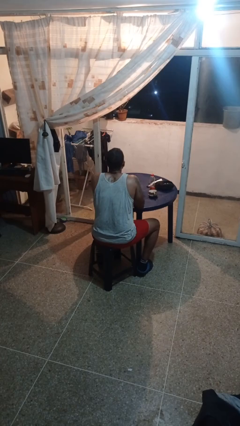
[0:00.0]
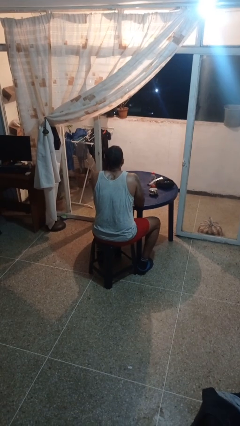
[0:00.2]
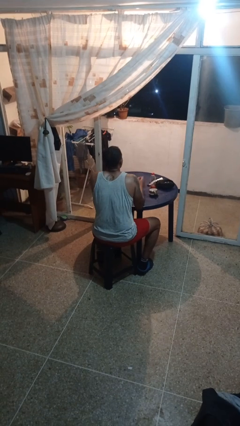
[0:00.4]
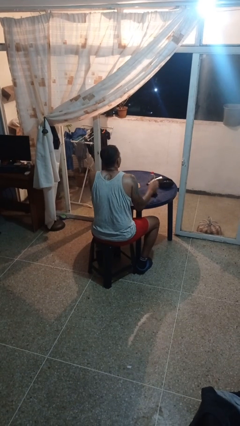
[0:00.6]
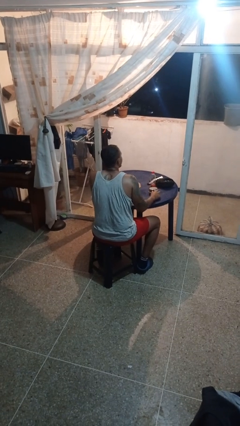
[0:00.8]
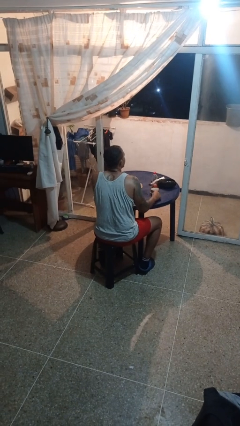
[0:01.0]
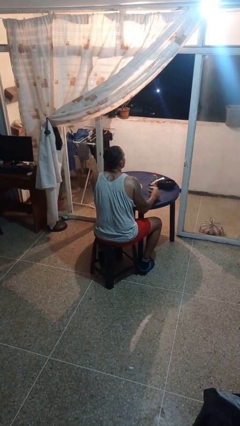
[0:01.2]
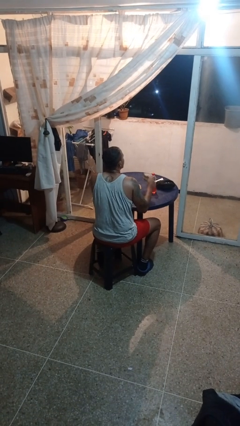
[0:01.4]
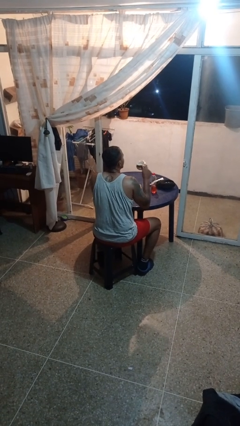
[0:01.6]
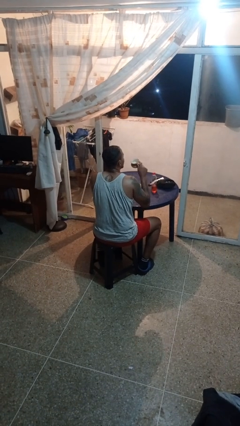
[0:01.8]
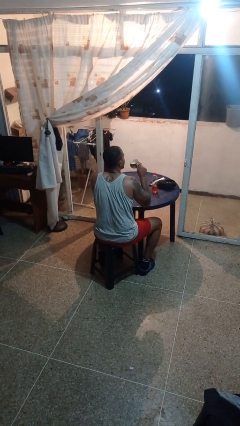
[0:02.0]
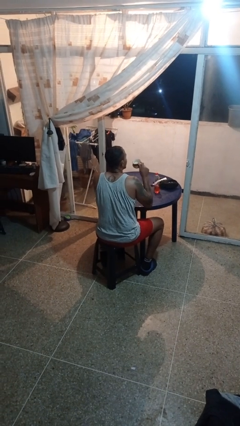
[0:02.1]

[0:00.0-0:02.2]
person picks up object from table

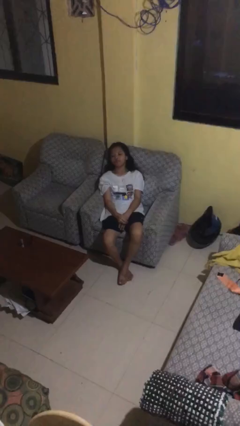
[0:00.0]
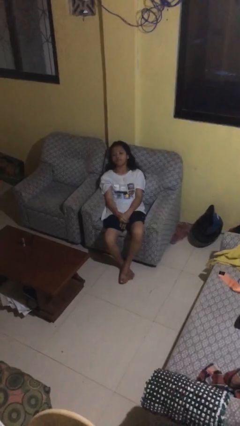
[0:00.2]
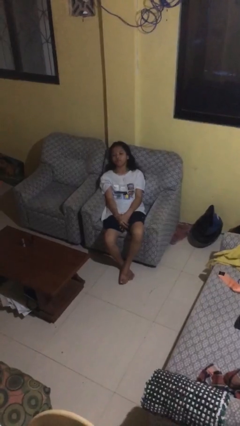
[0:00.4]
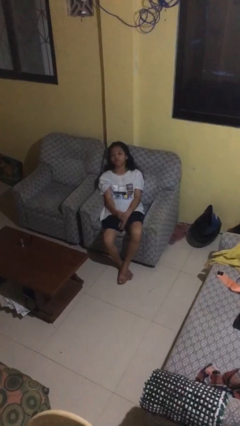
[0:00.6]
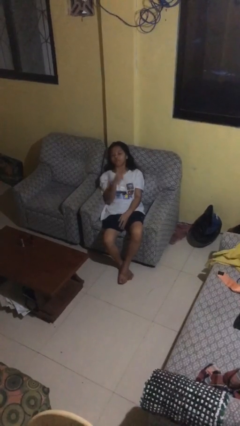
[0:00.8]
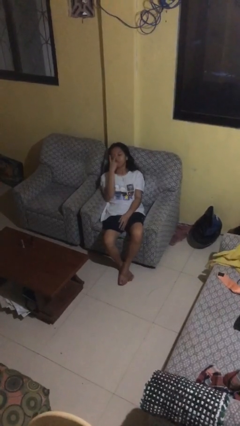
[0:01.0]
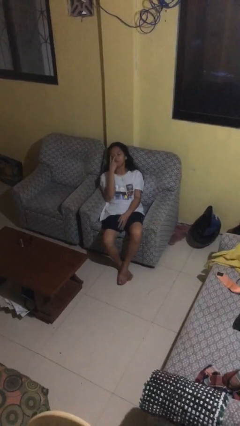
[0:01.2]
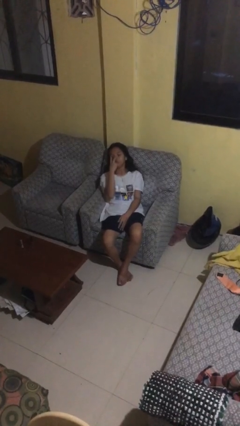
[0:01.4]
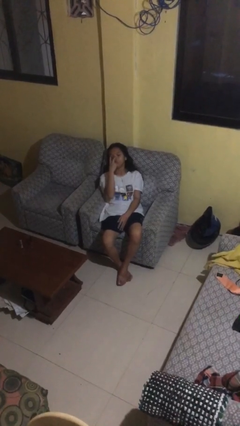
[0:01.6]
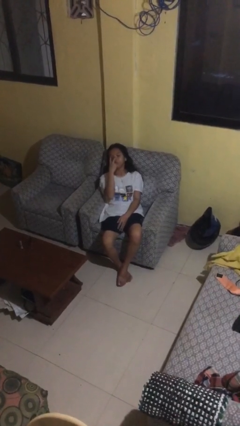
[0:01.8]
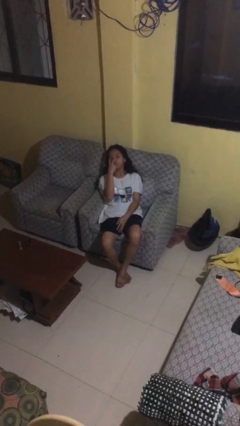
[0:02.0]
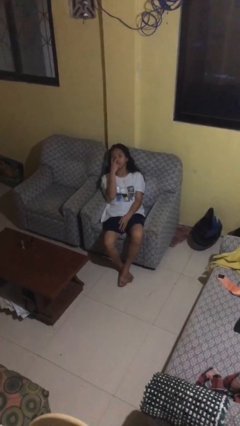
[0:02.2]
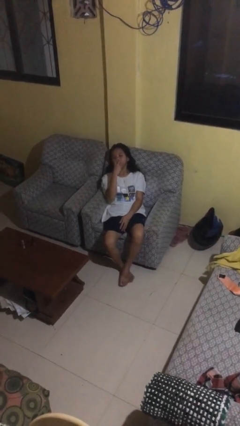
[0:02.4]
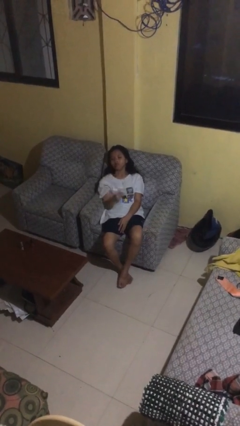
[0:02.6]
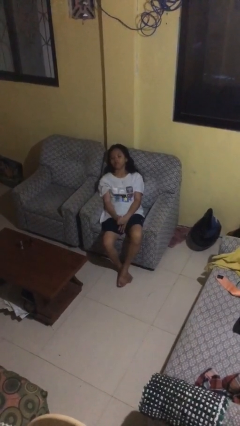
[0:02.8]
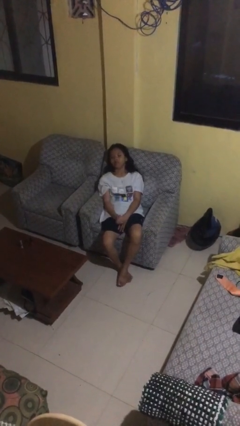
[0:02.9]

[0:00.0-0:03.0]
person gestures watch closely

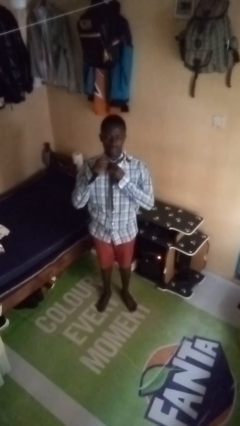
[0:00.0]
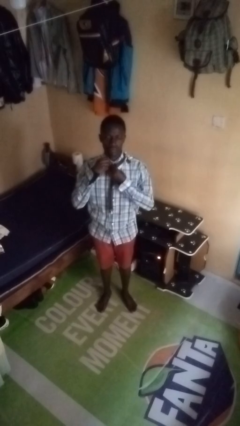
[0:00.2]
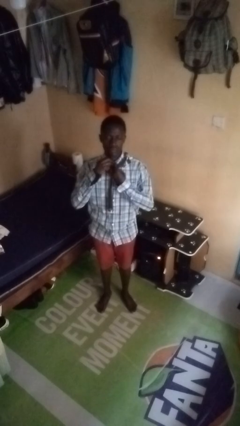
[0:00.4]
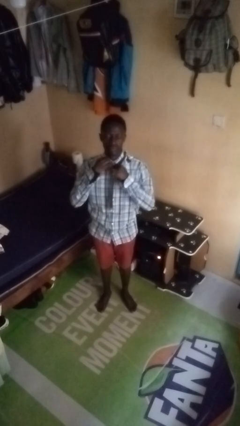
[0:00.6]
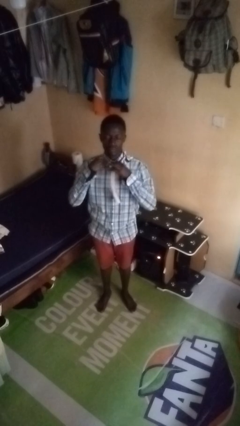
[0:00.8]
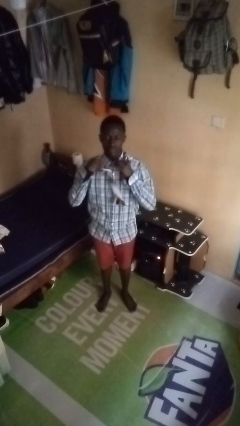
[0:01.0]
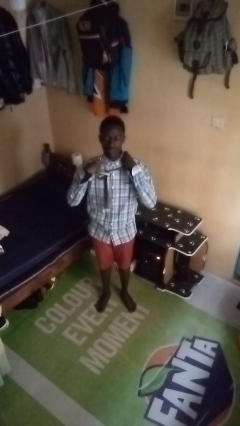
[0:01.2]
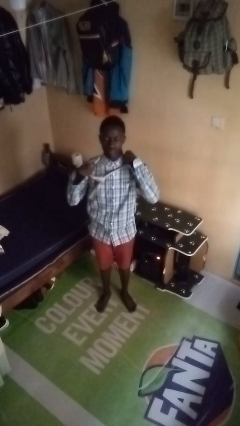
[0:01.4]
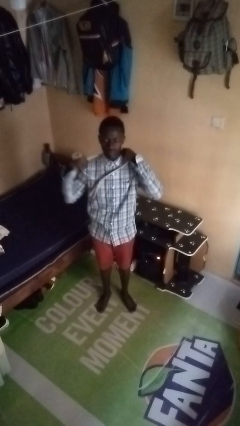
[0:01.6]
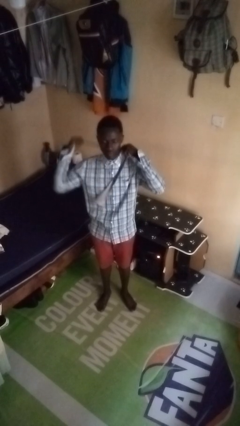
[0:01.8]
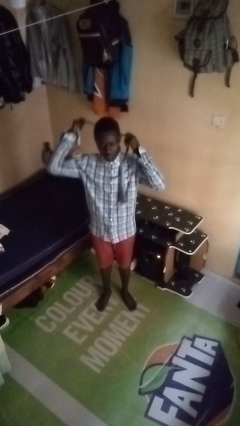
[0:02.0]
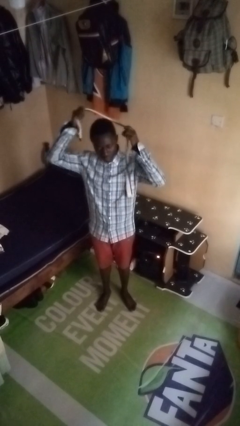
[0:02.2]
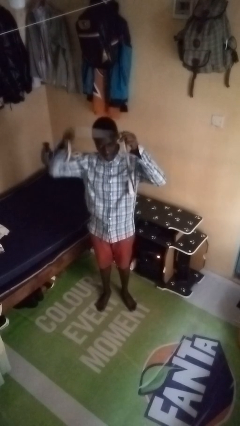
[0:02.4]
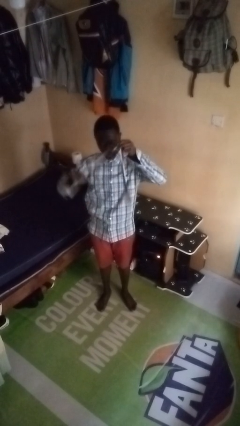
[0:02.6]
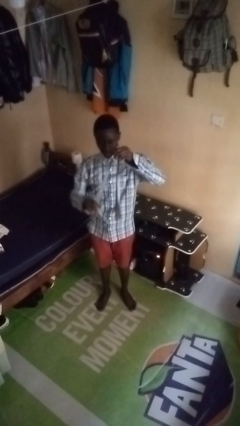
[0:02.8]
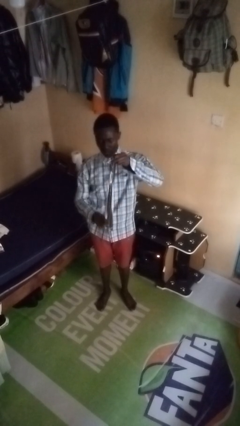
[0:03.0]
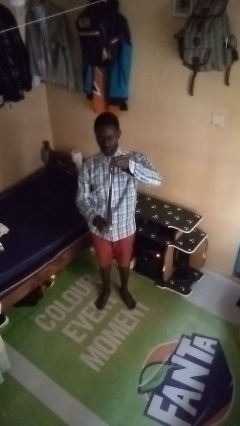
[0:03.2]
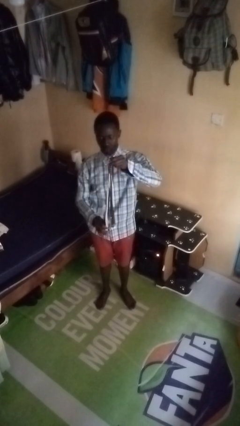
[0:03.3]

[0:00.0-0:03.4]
person takes off necktie

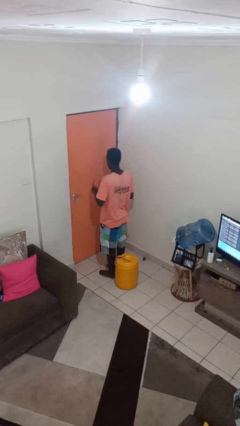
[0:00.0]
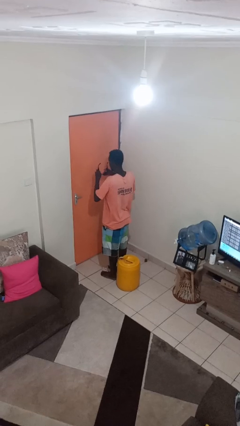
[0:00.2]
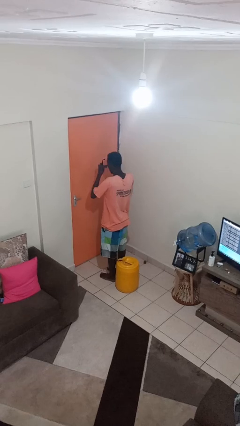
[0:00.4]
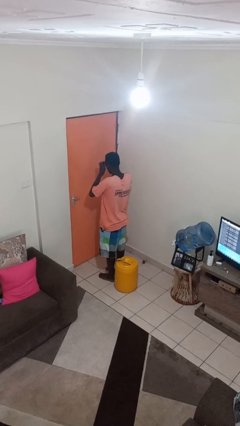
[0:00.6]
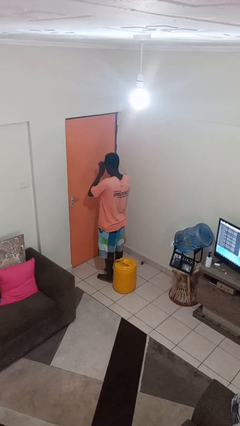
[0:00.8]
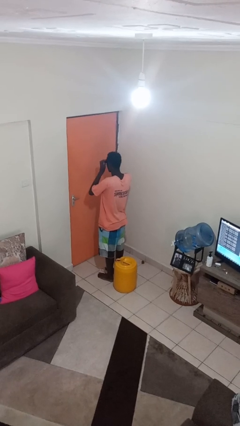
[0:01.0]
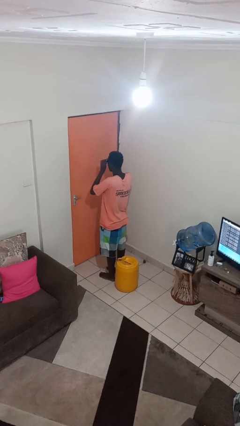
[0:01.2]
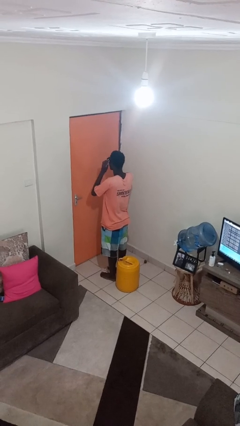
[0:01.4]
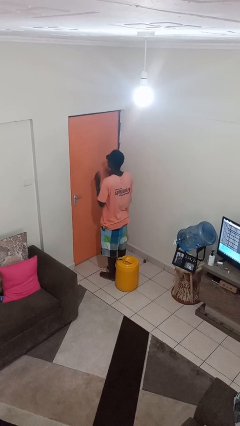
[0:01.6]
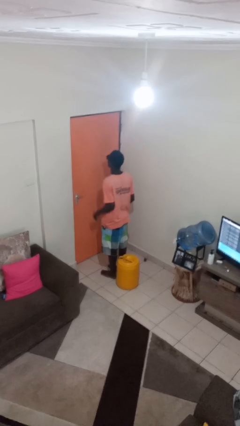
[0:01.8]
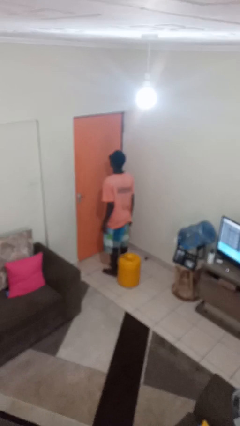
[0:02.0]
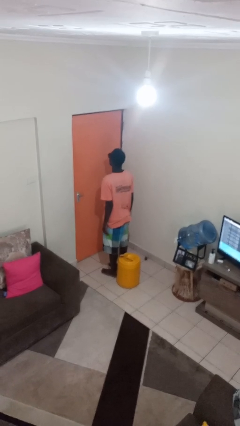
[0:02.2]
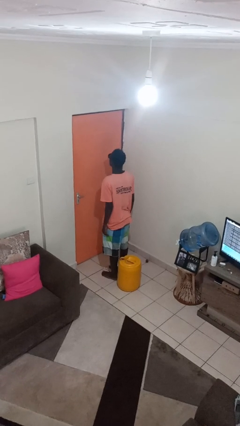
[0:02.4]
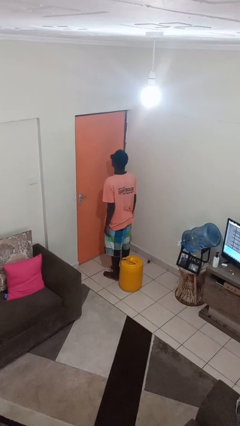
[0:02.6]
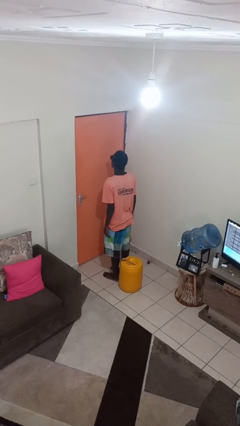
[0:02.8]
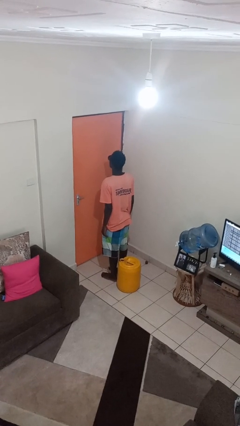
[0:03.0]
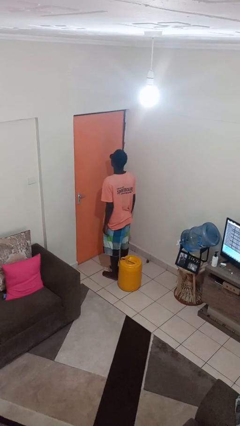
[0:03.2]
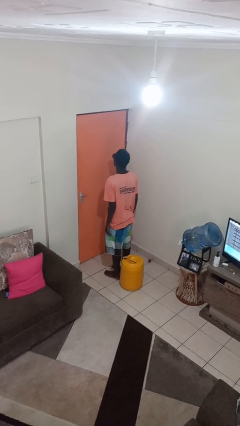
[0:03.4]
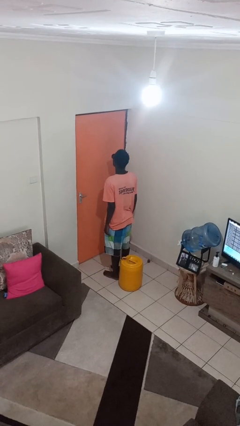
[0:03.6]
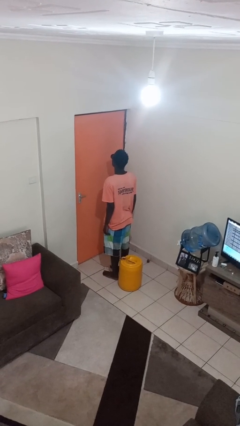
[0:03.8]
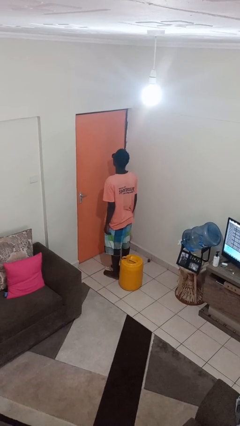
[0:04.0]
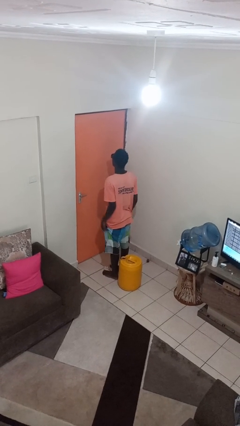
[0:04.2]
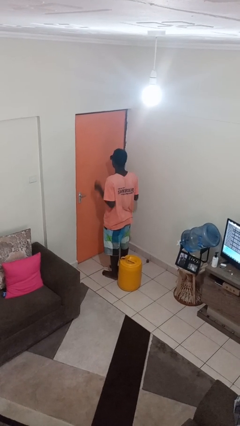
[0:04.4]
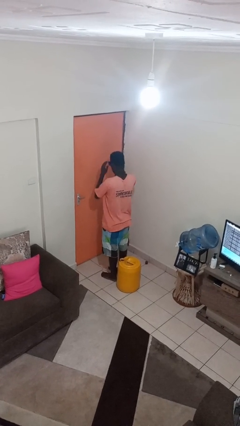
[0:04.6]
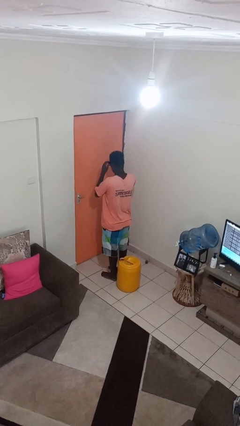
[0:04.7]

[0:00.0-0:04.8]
person puts on sunglasses

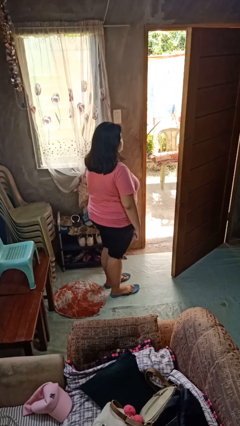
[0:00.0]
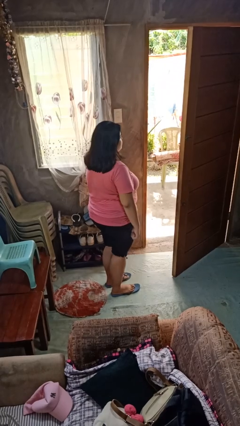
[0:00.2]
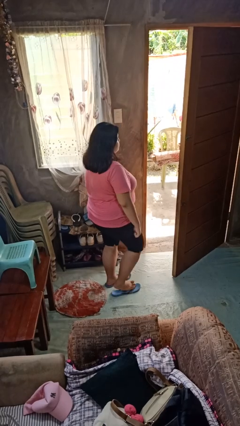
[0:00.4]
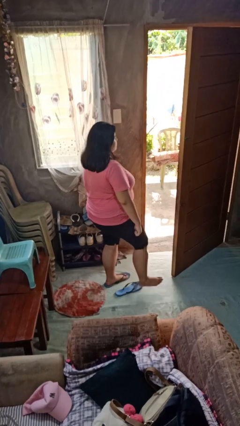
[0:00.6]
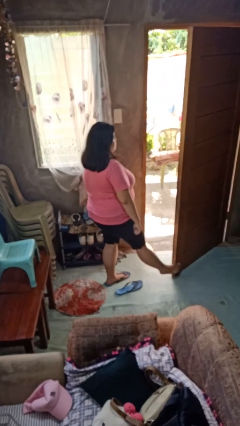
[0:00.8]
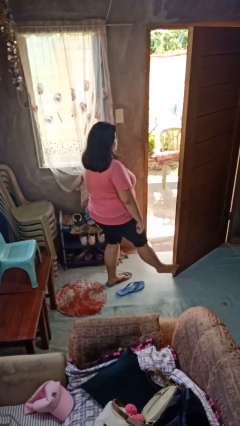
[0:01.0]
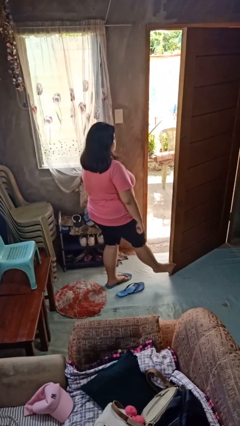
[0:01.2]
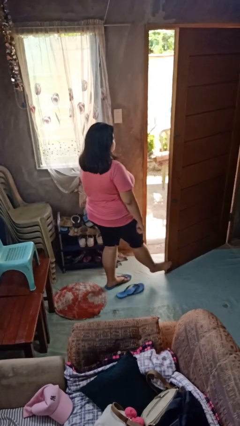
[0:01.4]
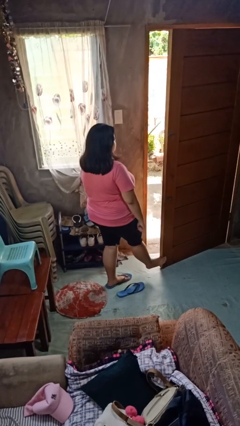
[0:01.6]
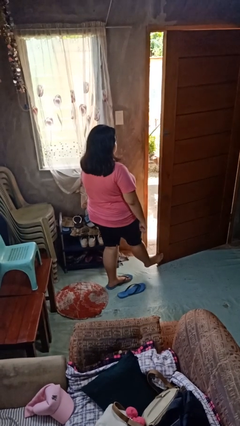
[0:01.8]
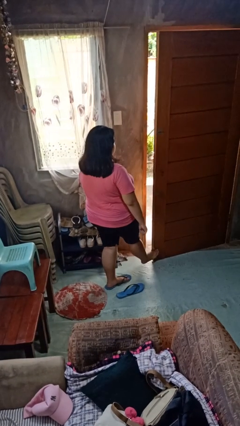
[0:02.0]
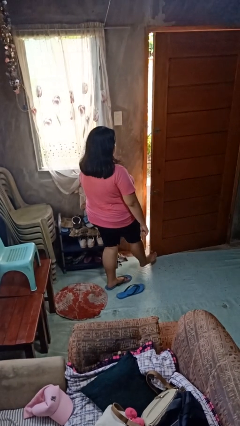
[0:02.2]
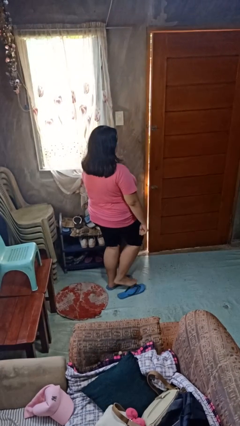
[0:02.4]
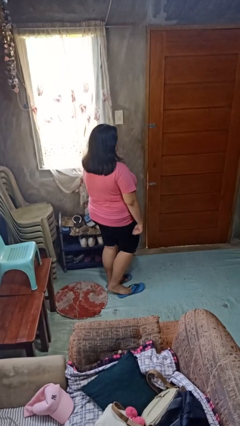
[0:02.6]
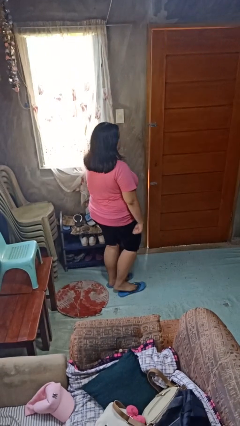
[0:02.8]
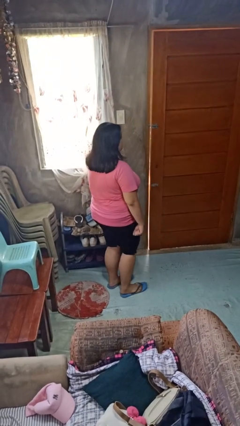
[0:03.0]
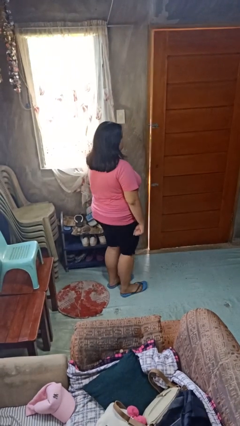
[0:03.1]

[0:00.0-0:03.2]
person closes door with foot

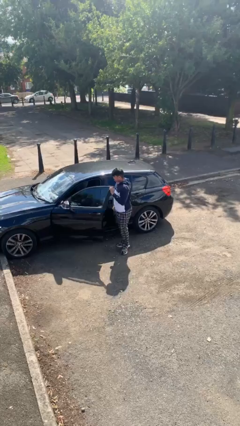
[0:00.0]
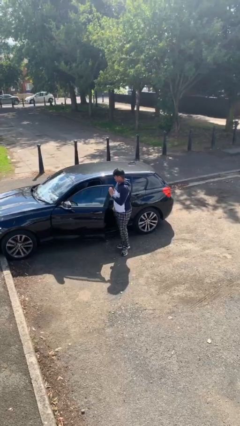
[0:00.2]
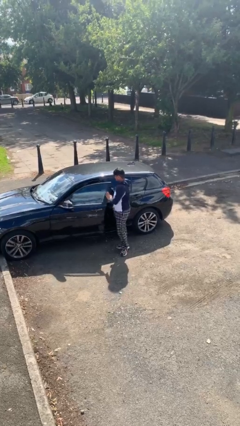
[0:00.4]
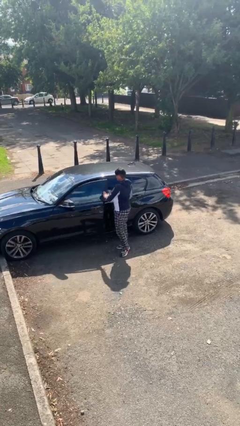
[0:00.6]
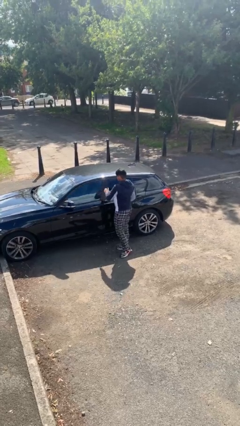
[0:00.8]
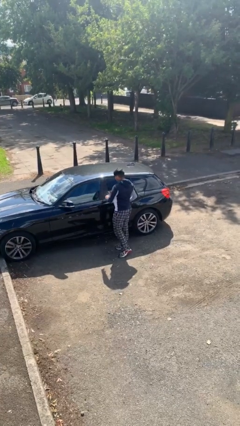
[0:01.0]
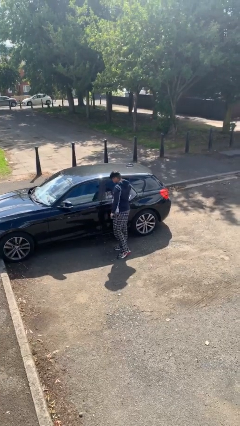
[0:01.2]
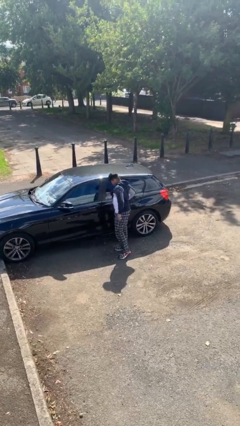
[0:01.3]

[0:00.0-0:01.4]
person closes car door
